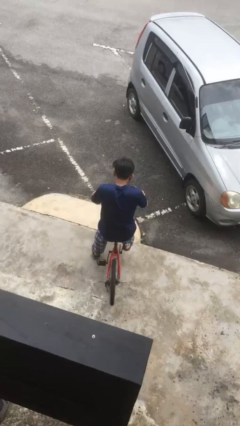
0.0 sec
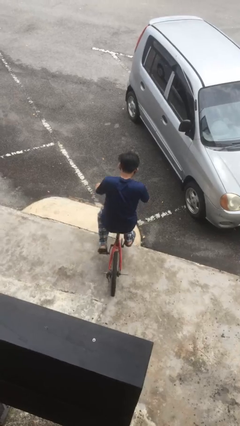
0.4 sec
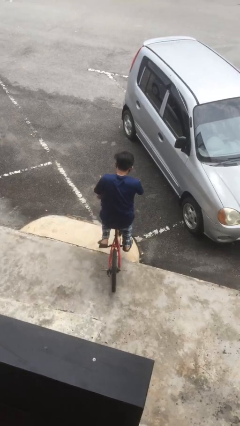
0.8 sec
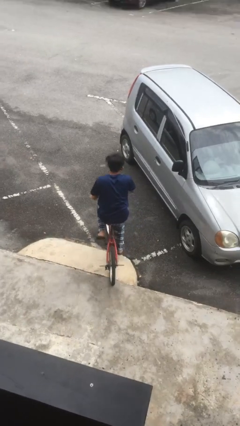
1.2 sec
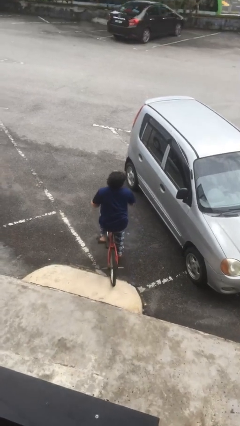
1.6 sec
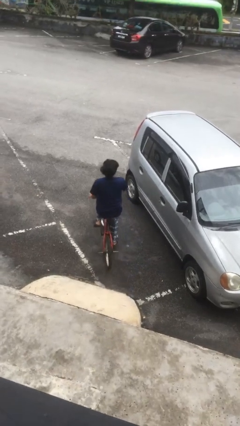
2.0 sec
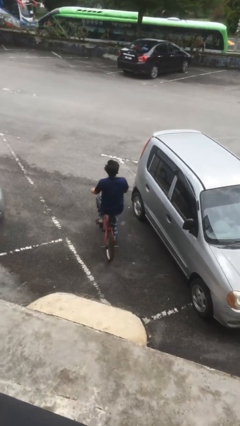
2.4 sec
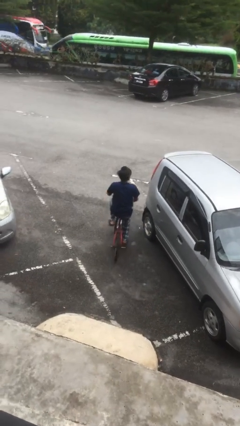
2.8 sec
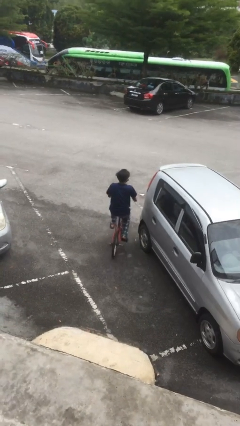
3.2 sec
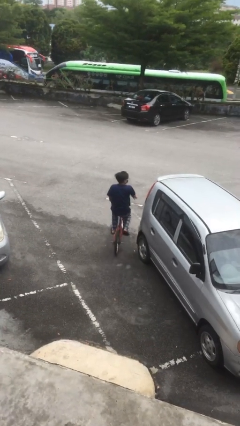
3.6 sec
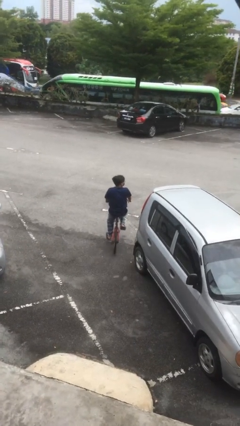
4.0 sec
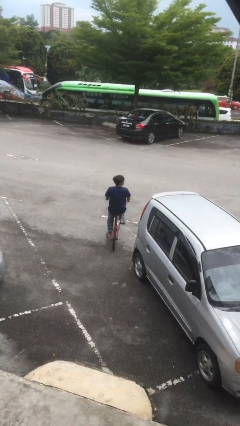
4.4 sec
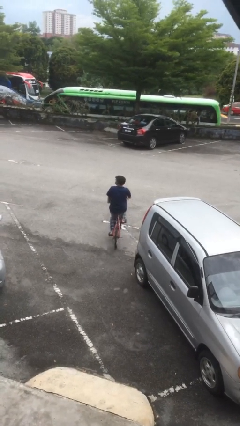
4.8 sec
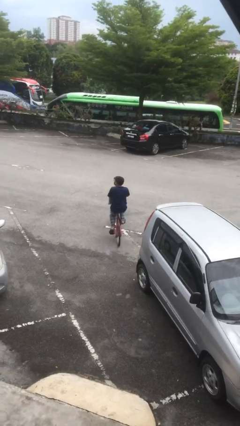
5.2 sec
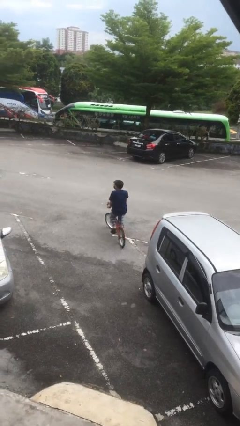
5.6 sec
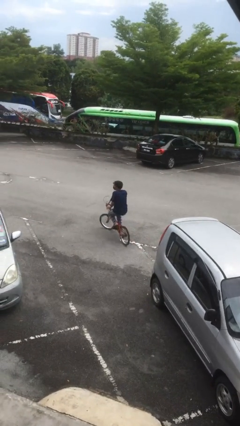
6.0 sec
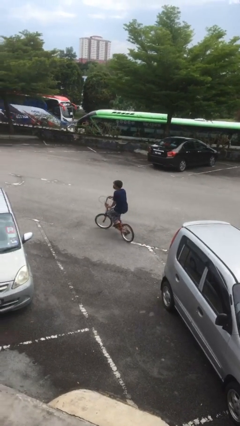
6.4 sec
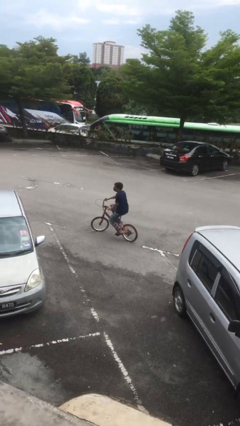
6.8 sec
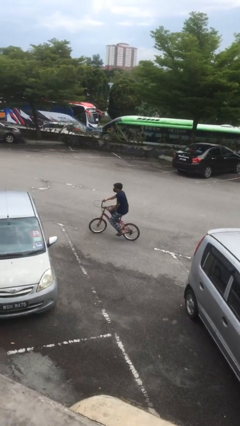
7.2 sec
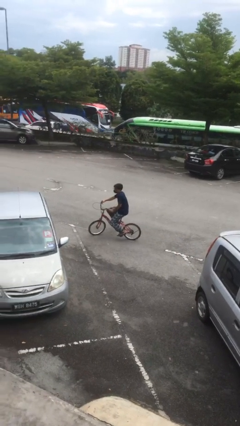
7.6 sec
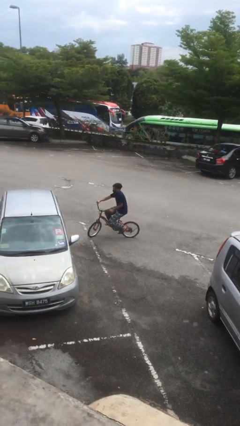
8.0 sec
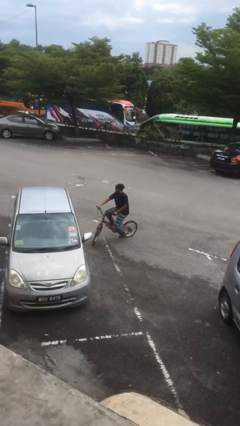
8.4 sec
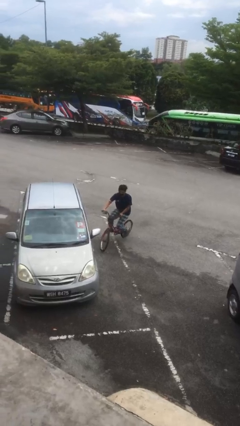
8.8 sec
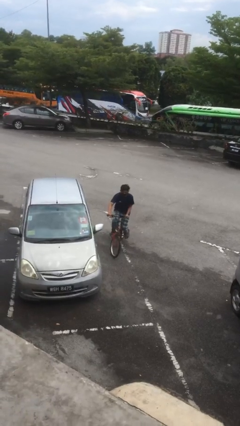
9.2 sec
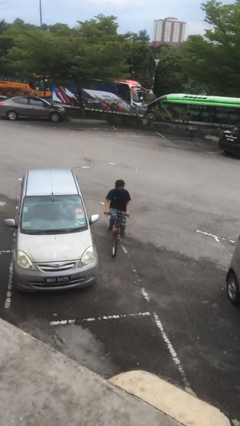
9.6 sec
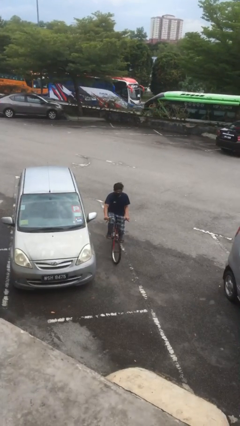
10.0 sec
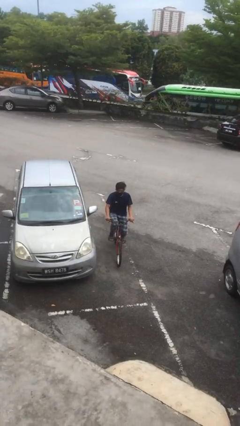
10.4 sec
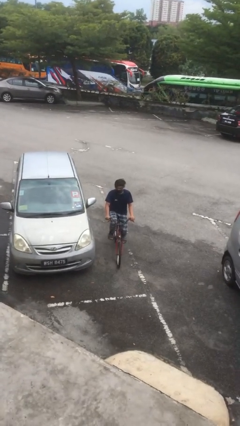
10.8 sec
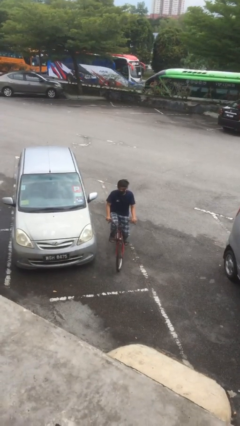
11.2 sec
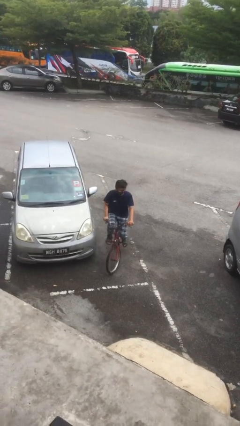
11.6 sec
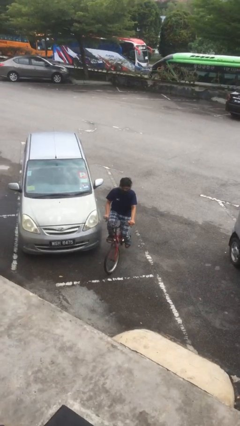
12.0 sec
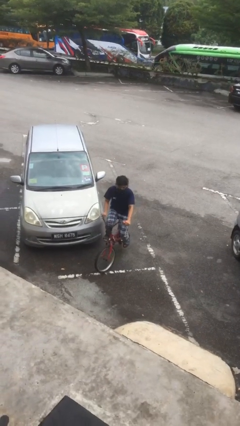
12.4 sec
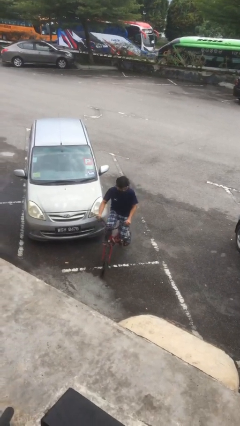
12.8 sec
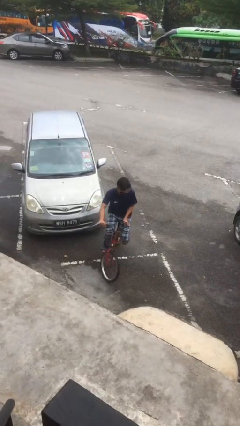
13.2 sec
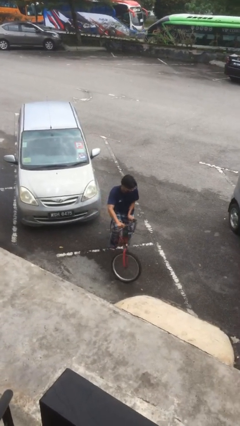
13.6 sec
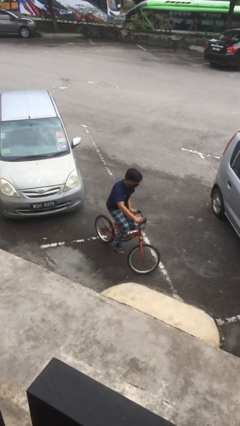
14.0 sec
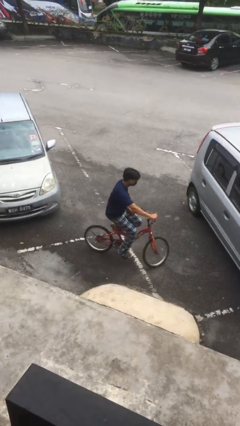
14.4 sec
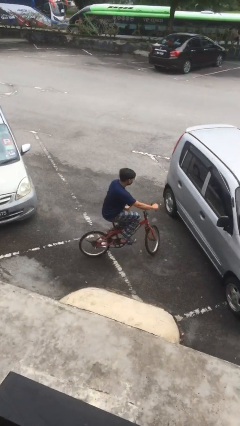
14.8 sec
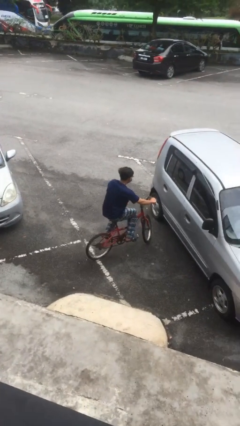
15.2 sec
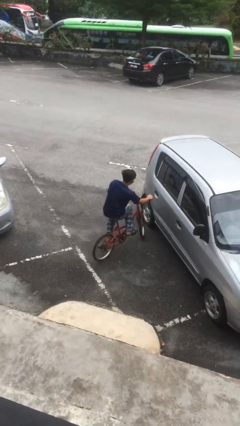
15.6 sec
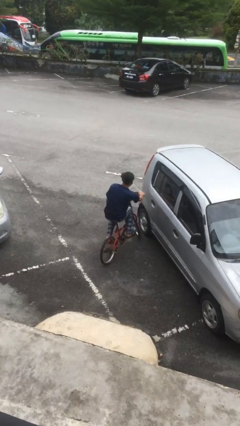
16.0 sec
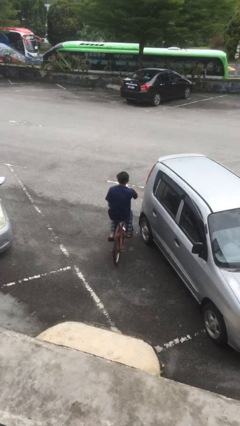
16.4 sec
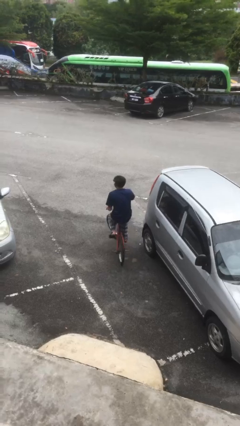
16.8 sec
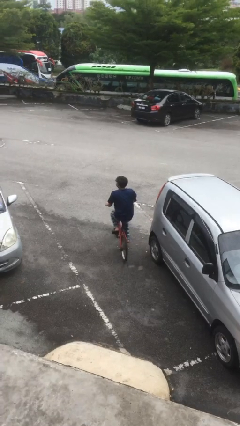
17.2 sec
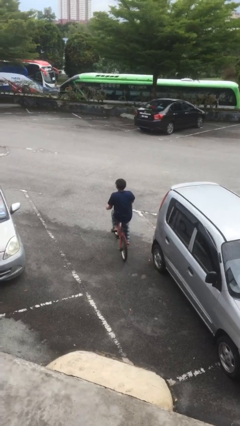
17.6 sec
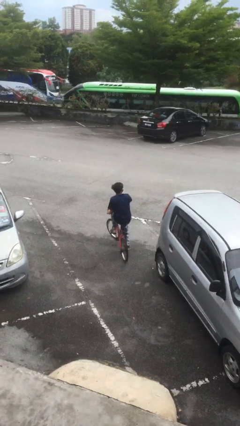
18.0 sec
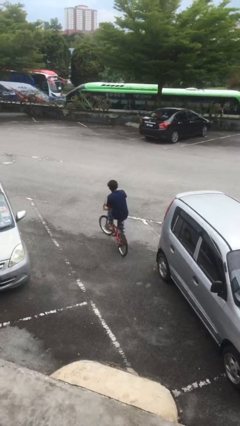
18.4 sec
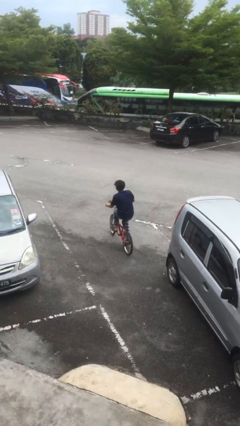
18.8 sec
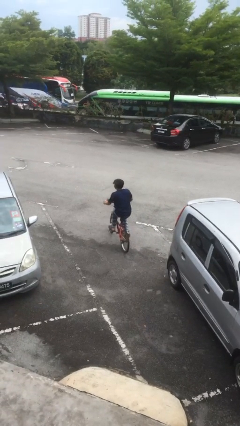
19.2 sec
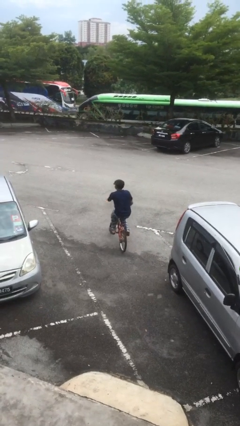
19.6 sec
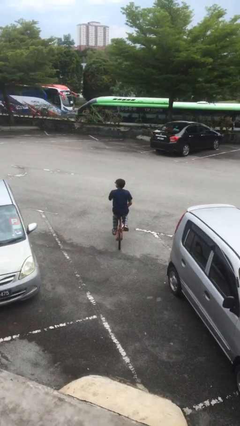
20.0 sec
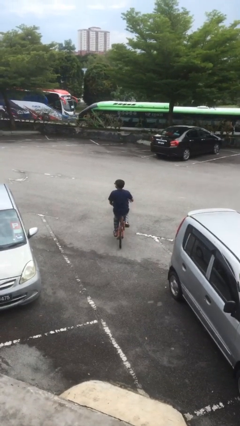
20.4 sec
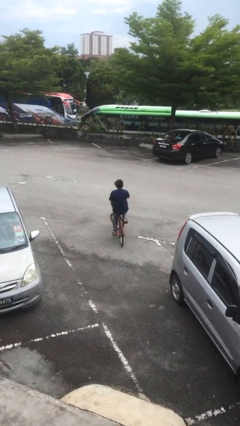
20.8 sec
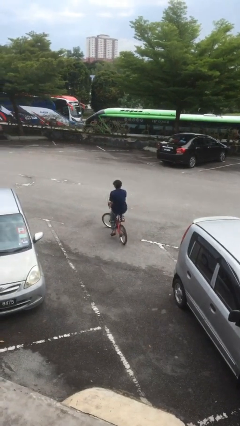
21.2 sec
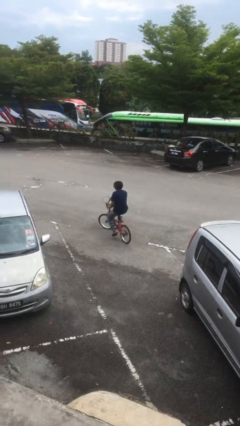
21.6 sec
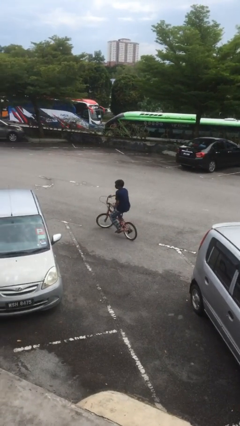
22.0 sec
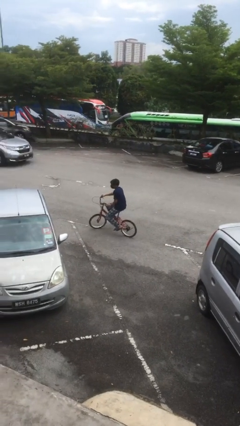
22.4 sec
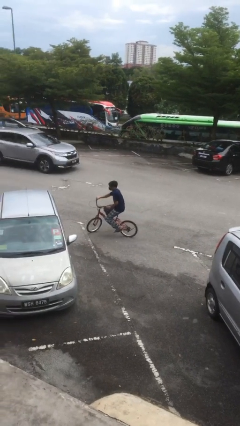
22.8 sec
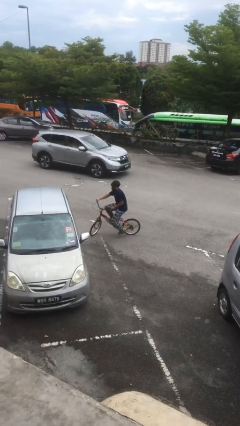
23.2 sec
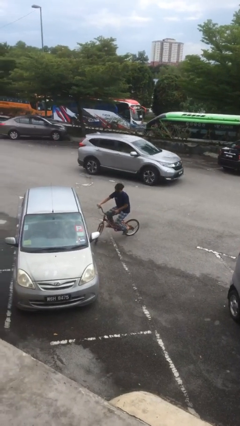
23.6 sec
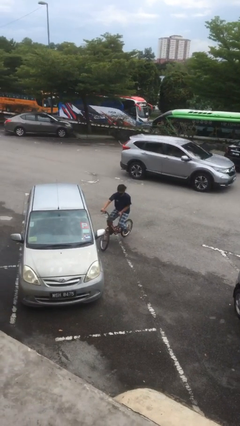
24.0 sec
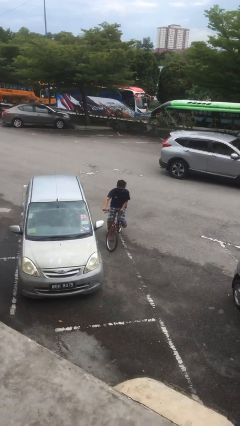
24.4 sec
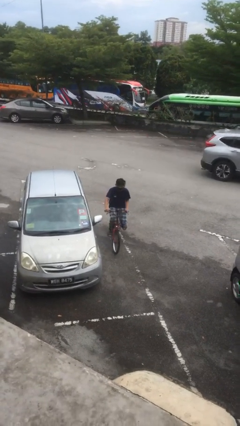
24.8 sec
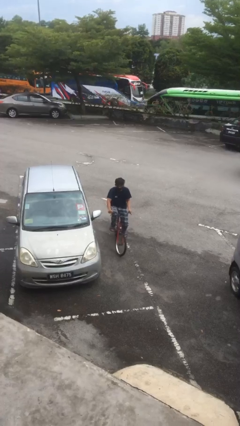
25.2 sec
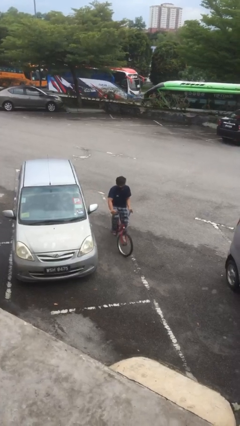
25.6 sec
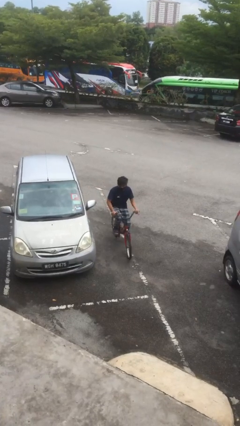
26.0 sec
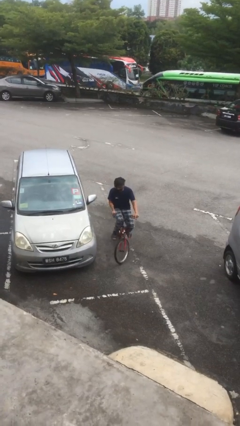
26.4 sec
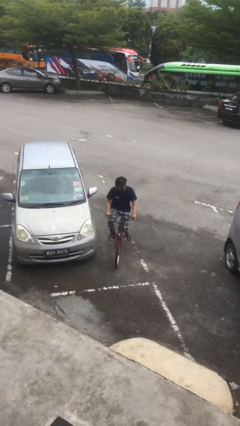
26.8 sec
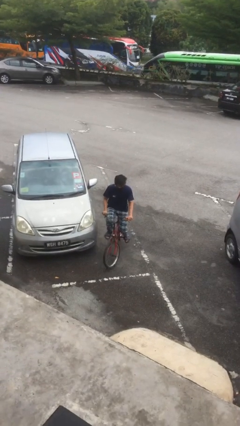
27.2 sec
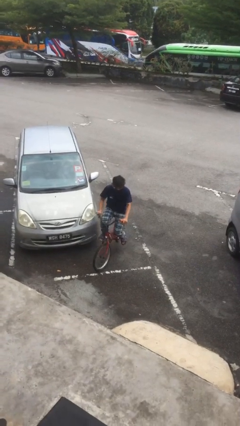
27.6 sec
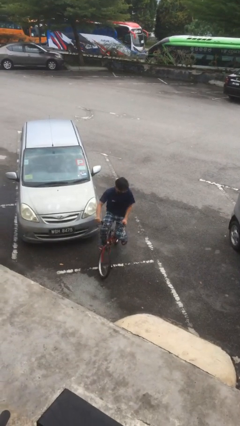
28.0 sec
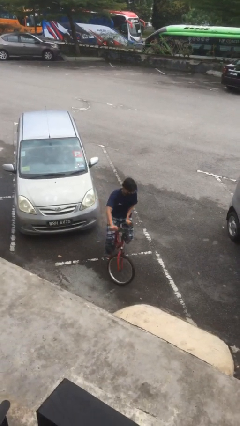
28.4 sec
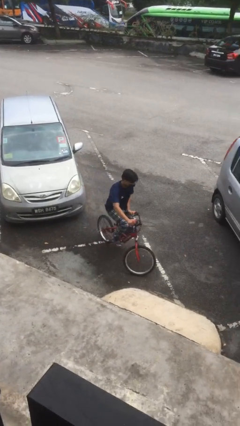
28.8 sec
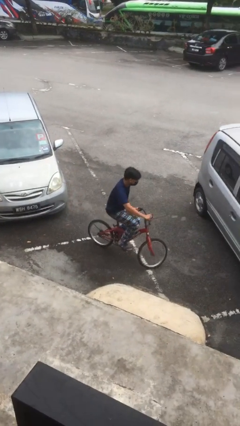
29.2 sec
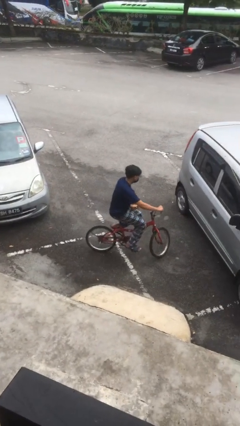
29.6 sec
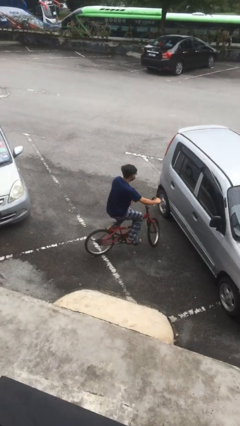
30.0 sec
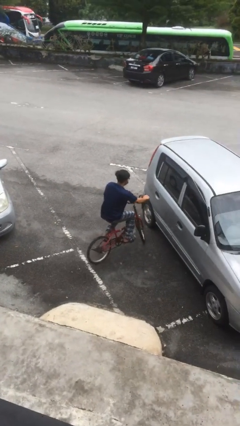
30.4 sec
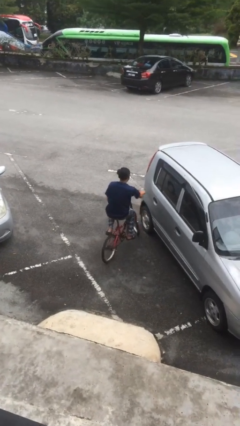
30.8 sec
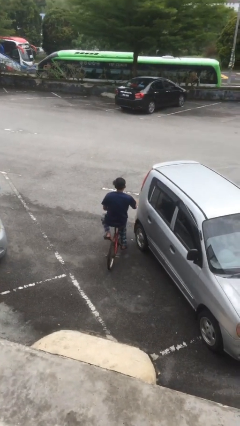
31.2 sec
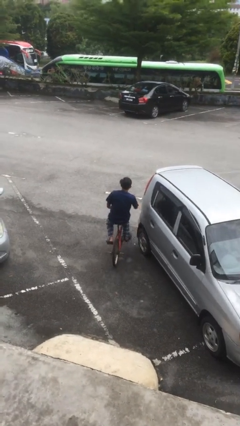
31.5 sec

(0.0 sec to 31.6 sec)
person rides bicycle

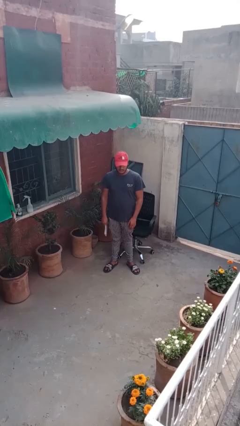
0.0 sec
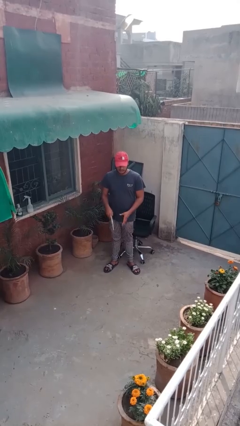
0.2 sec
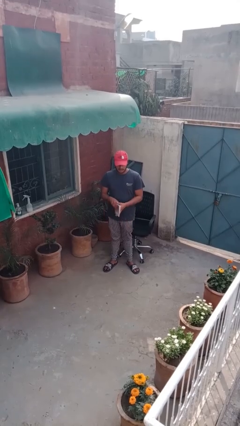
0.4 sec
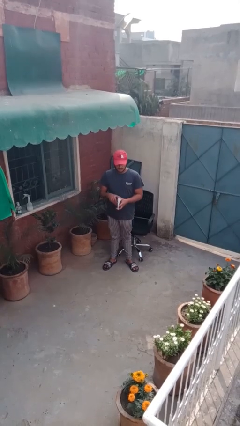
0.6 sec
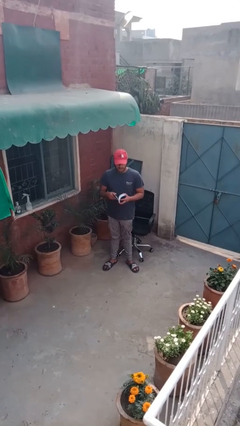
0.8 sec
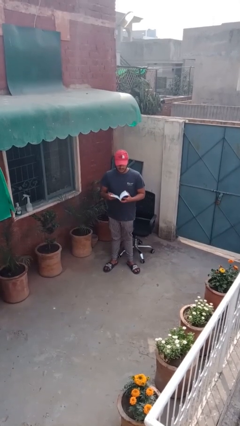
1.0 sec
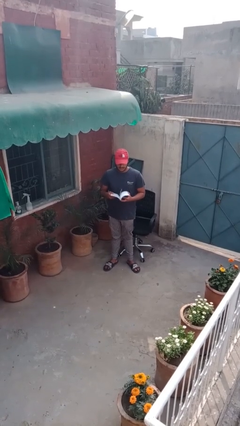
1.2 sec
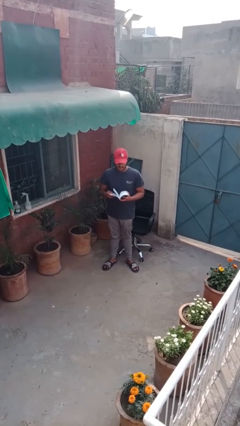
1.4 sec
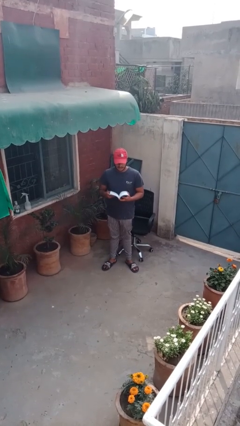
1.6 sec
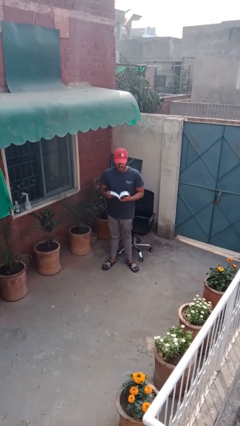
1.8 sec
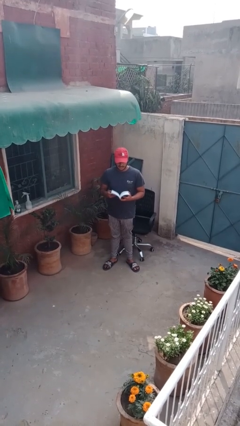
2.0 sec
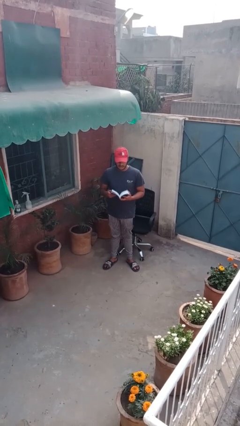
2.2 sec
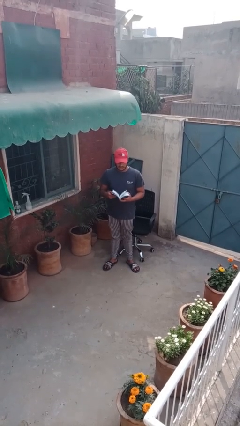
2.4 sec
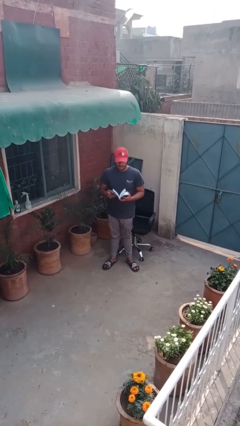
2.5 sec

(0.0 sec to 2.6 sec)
person reads document
